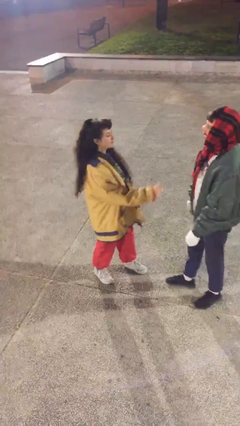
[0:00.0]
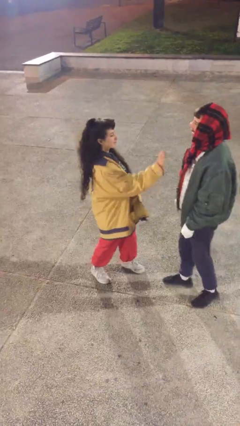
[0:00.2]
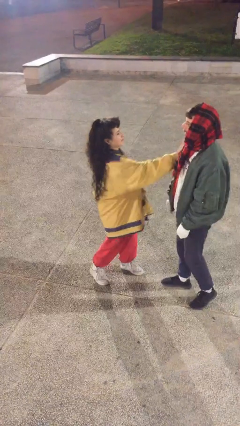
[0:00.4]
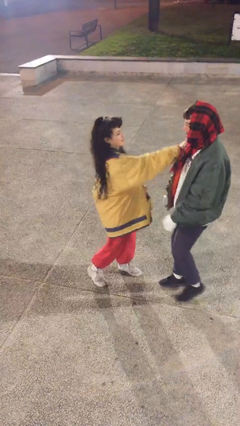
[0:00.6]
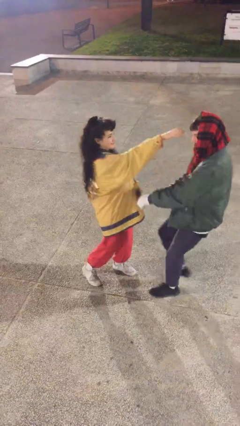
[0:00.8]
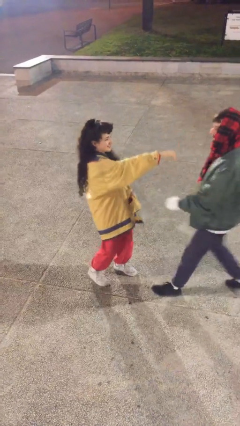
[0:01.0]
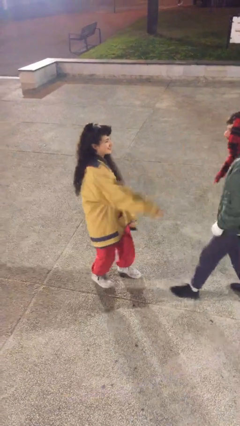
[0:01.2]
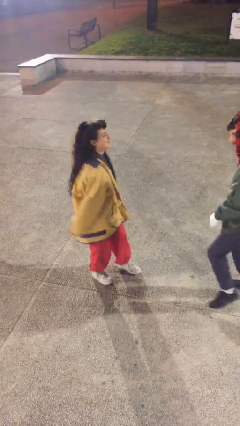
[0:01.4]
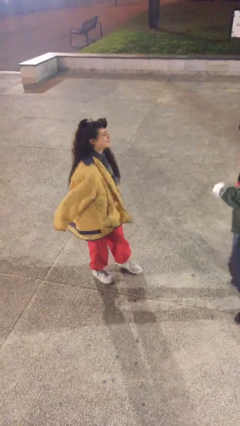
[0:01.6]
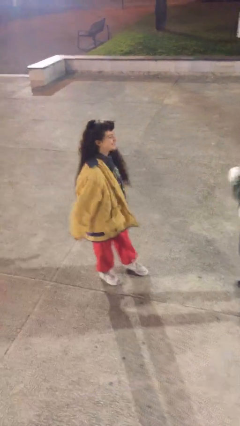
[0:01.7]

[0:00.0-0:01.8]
person shoves person

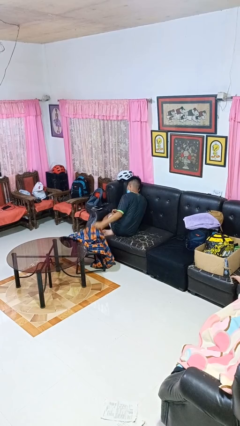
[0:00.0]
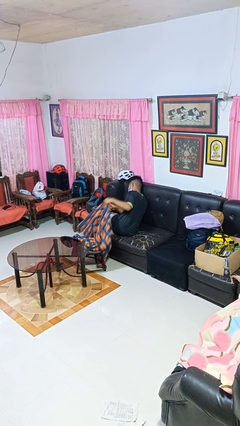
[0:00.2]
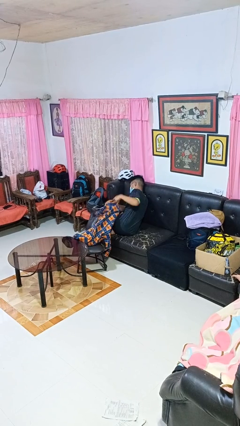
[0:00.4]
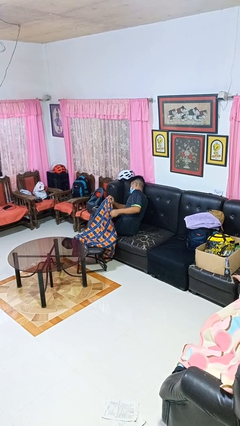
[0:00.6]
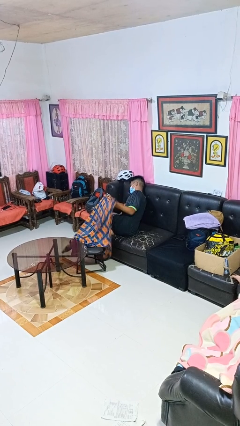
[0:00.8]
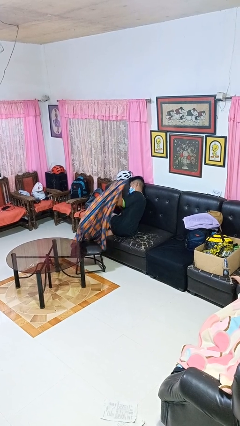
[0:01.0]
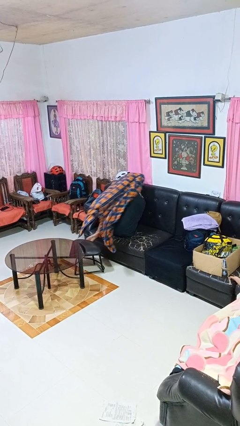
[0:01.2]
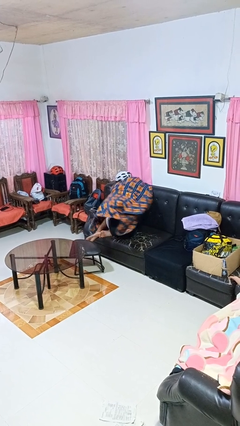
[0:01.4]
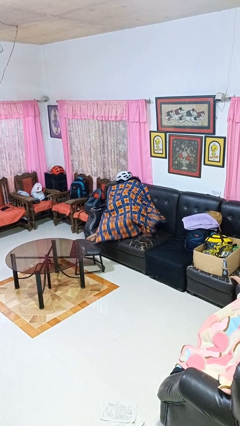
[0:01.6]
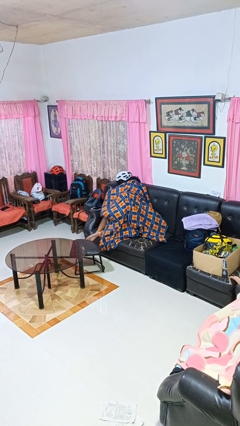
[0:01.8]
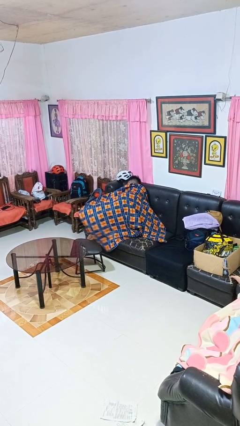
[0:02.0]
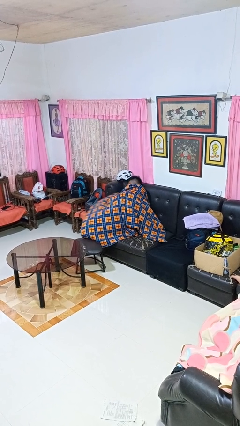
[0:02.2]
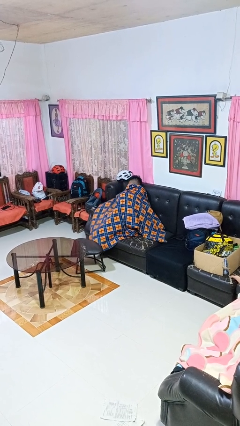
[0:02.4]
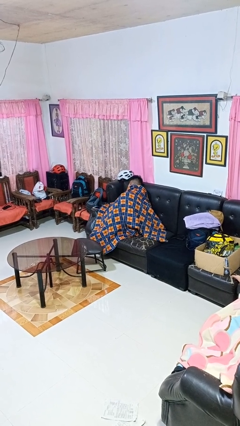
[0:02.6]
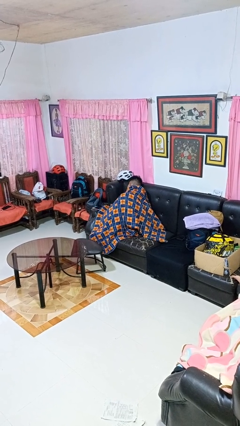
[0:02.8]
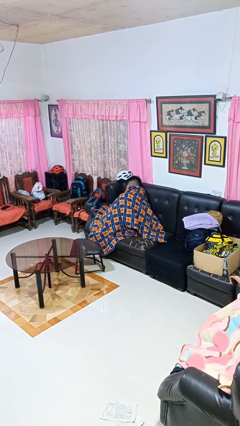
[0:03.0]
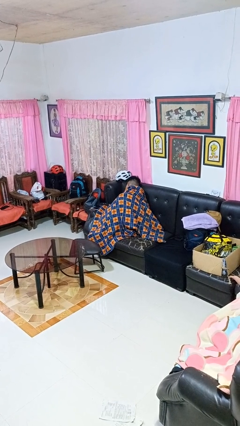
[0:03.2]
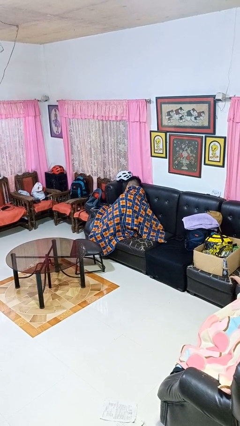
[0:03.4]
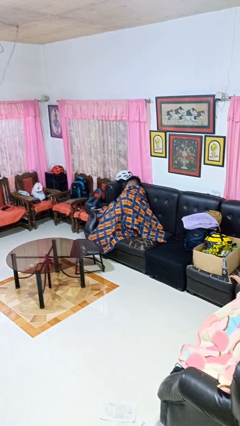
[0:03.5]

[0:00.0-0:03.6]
person covers with blanket

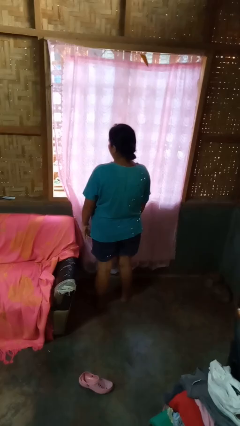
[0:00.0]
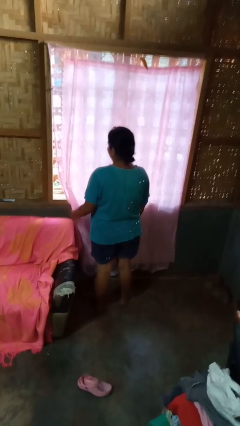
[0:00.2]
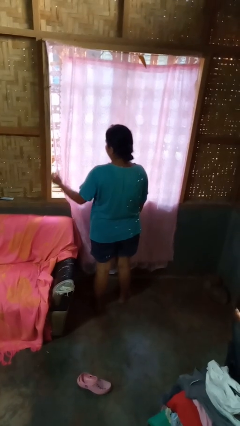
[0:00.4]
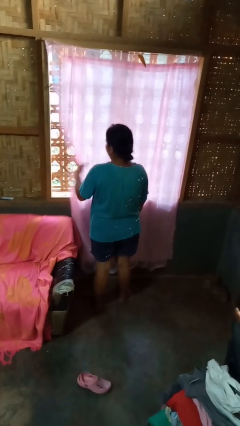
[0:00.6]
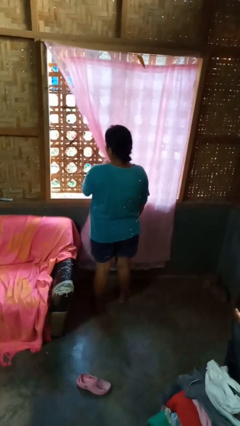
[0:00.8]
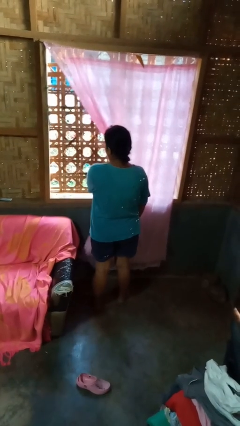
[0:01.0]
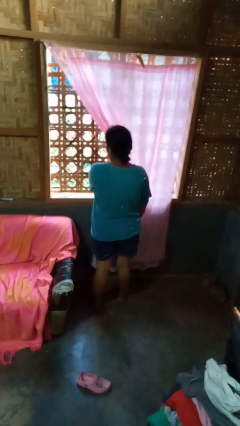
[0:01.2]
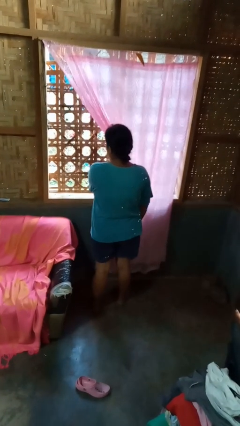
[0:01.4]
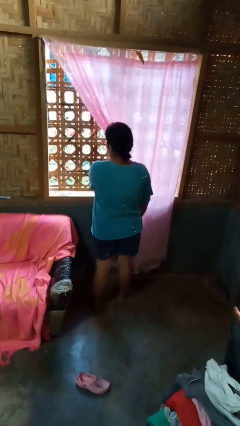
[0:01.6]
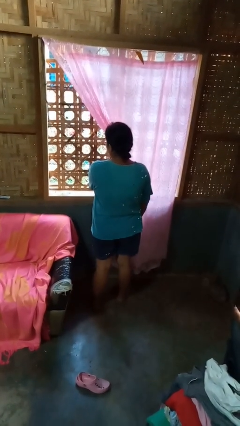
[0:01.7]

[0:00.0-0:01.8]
person opens curtains

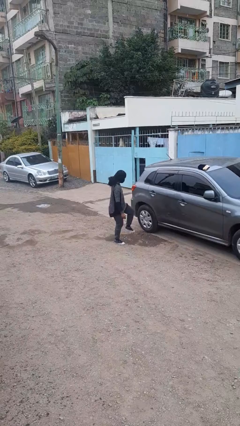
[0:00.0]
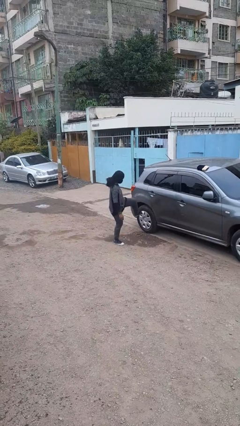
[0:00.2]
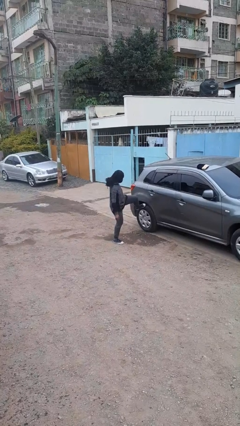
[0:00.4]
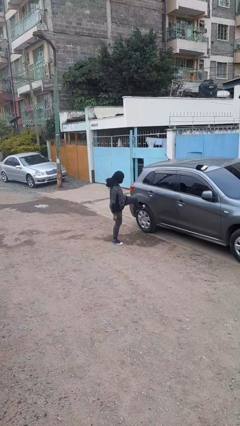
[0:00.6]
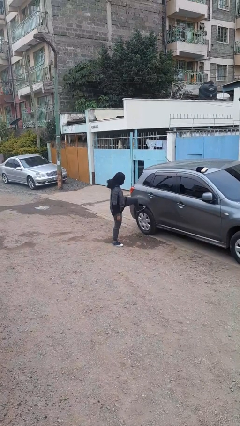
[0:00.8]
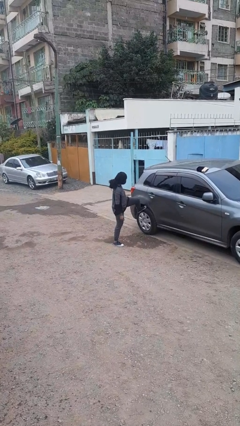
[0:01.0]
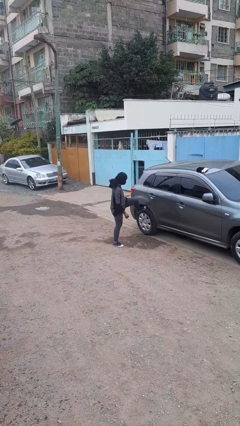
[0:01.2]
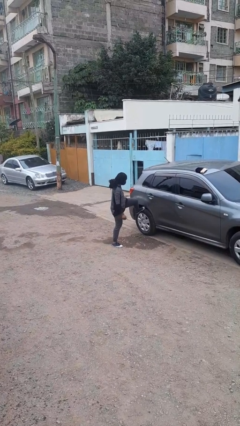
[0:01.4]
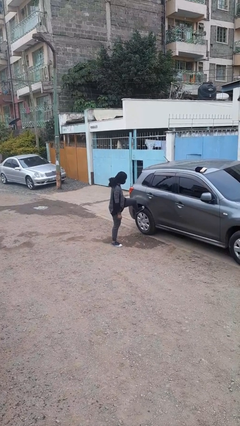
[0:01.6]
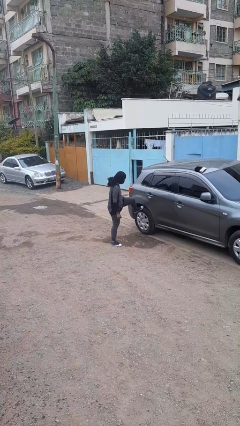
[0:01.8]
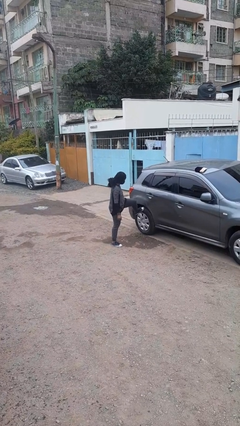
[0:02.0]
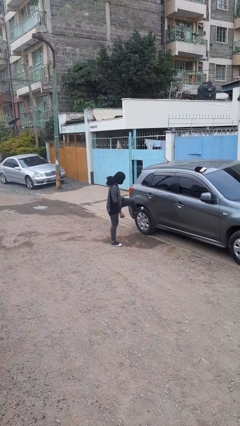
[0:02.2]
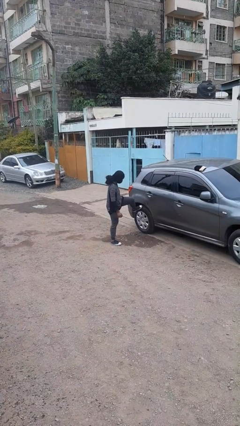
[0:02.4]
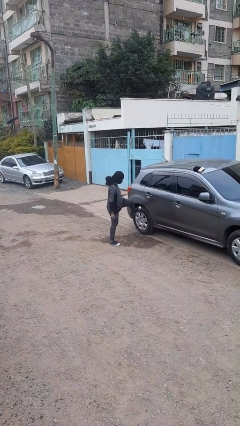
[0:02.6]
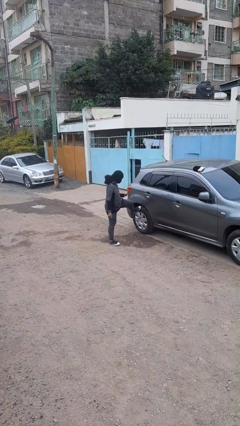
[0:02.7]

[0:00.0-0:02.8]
person kicks car tires

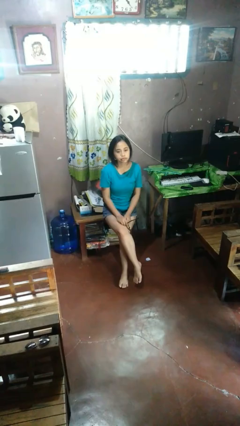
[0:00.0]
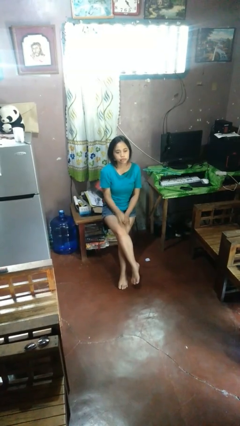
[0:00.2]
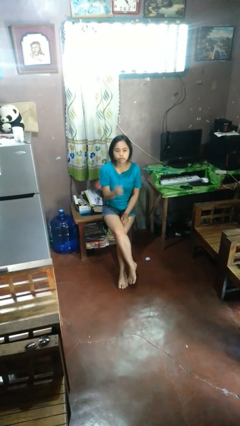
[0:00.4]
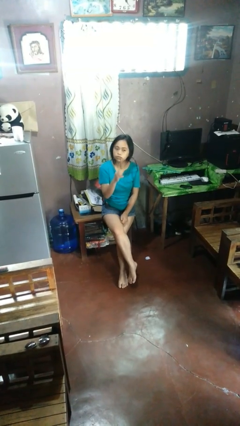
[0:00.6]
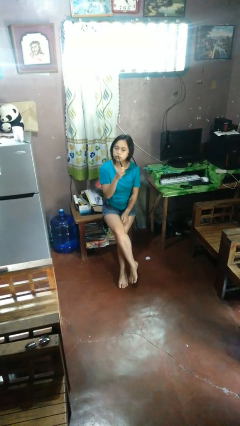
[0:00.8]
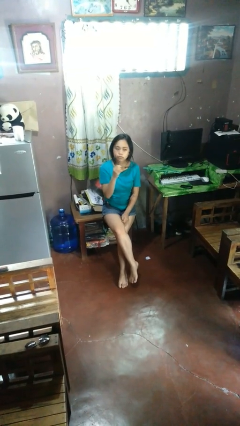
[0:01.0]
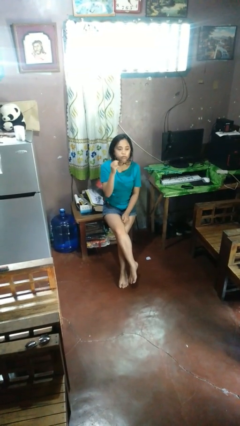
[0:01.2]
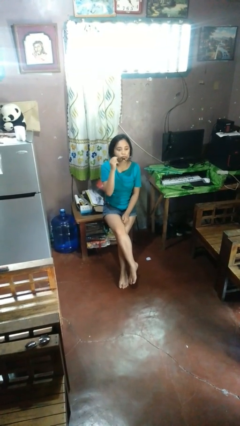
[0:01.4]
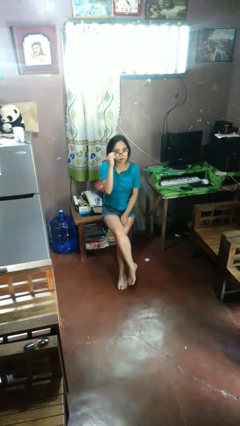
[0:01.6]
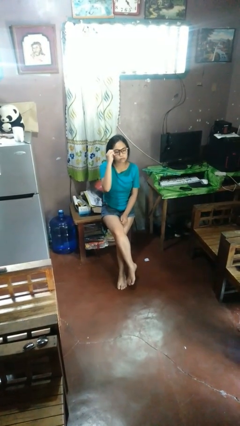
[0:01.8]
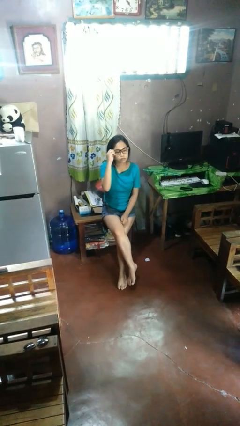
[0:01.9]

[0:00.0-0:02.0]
person puts on glasses

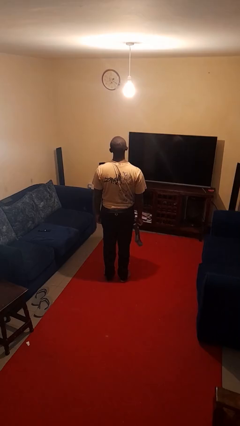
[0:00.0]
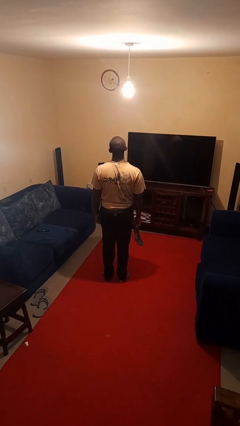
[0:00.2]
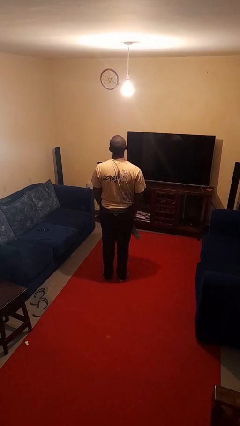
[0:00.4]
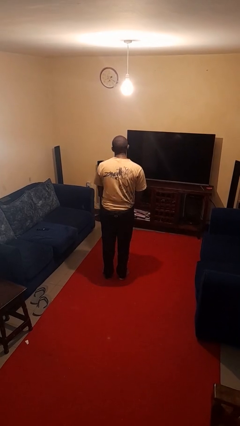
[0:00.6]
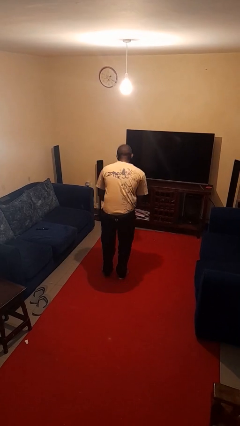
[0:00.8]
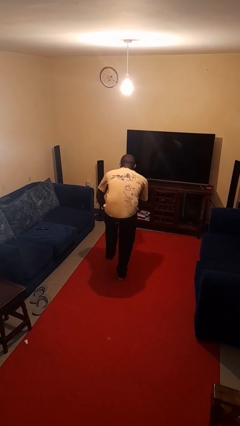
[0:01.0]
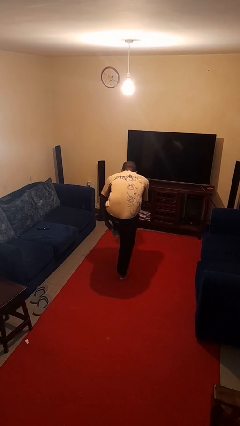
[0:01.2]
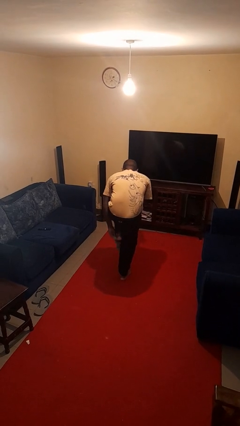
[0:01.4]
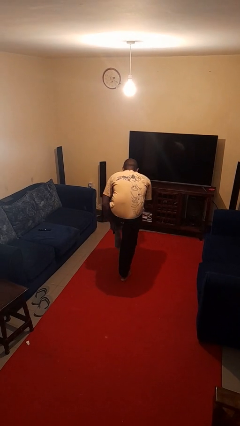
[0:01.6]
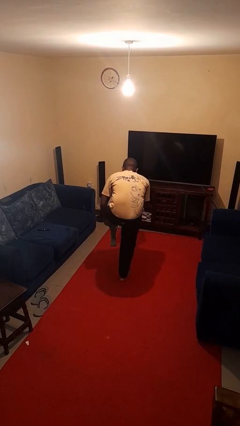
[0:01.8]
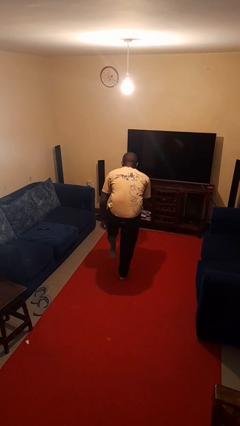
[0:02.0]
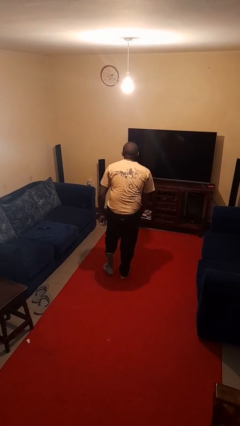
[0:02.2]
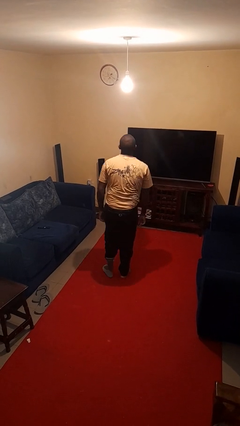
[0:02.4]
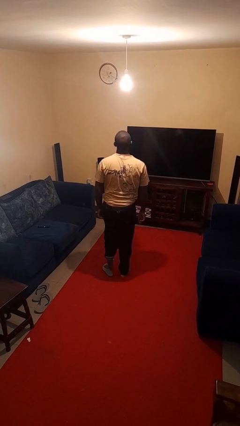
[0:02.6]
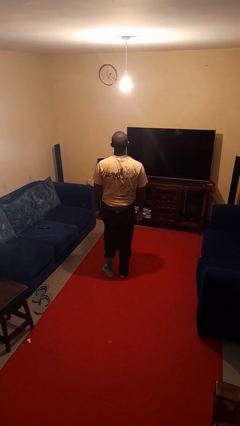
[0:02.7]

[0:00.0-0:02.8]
person puts on socks

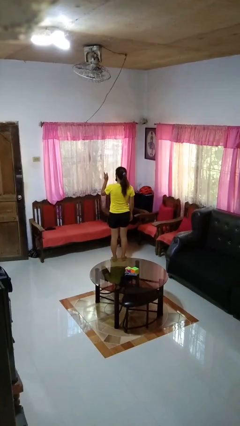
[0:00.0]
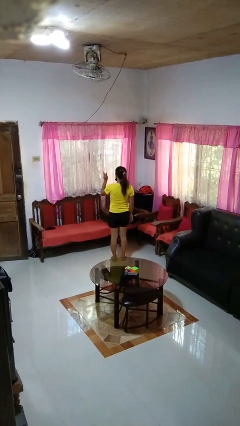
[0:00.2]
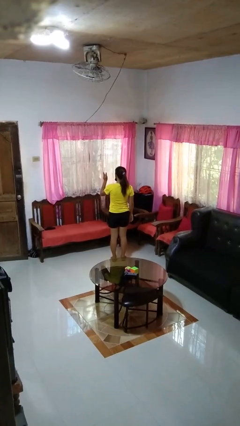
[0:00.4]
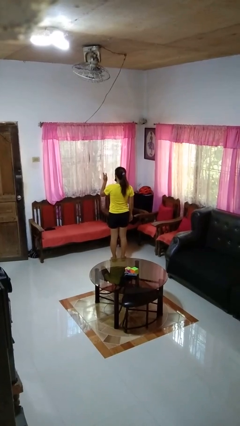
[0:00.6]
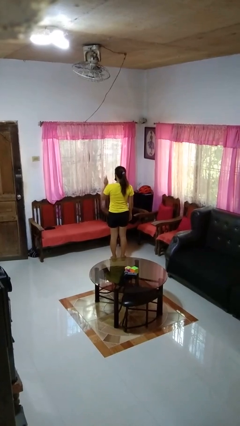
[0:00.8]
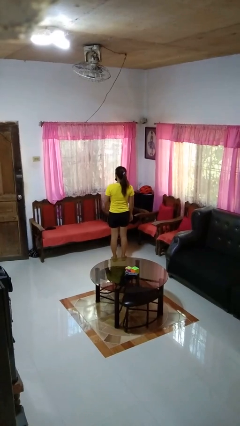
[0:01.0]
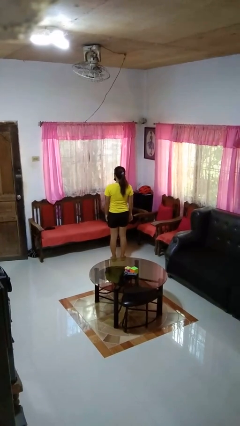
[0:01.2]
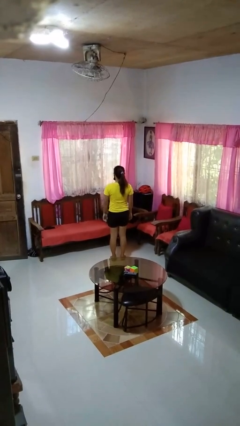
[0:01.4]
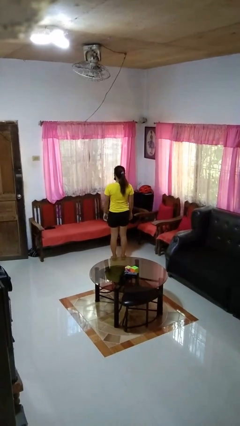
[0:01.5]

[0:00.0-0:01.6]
person gestures number three

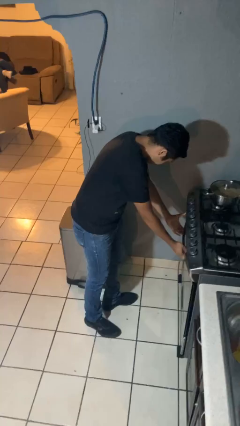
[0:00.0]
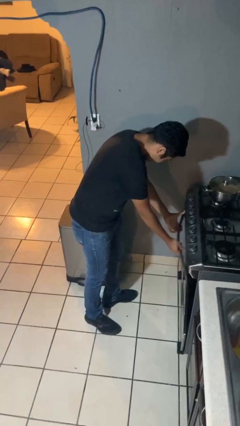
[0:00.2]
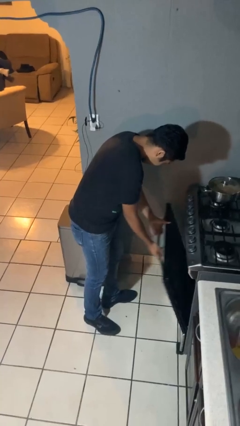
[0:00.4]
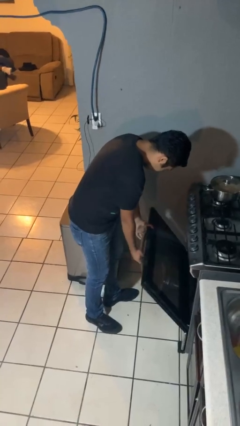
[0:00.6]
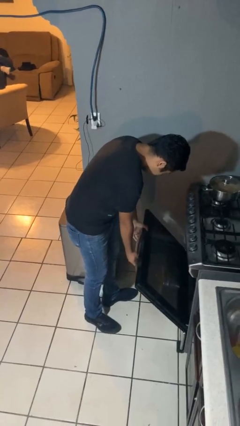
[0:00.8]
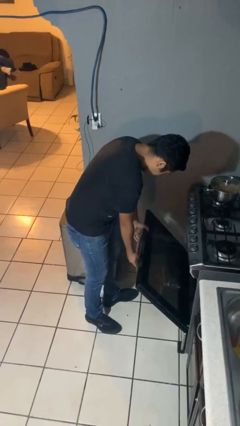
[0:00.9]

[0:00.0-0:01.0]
person opens oven door
